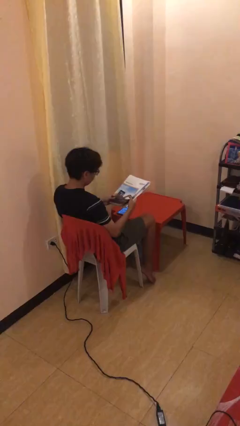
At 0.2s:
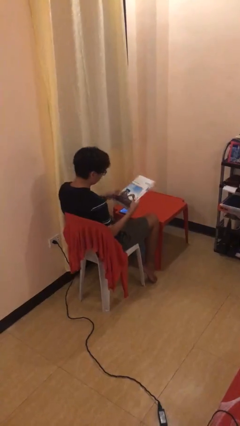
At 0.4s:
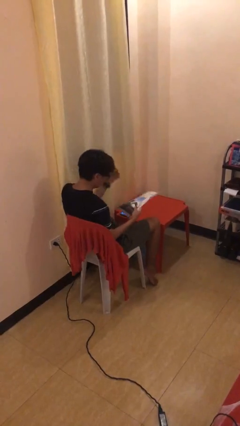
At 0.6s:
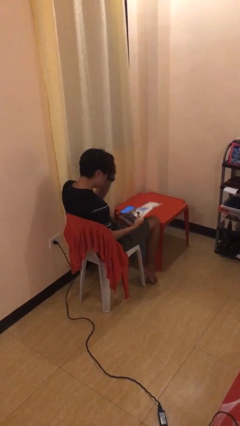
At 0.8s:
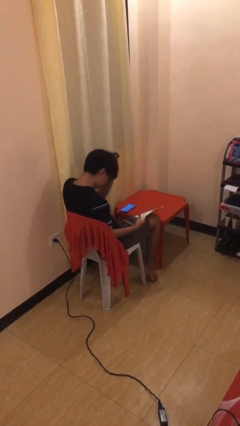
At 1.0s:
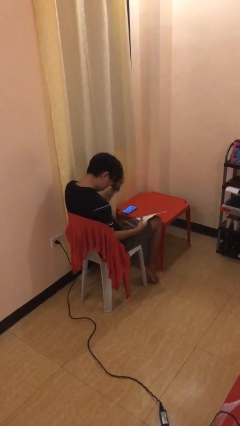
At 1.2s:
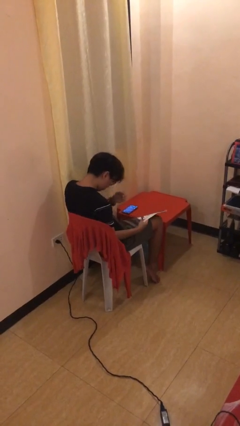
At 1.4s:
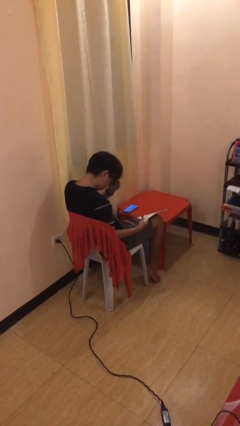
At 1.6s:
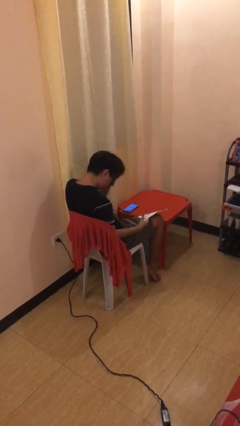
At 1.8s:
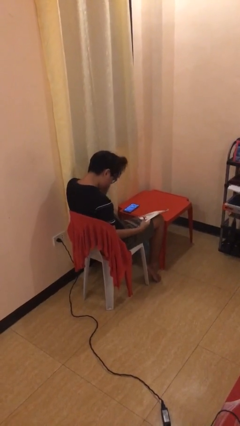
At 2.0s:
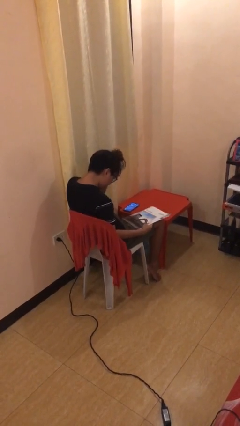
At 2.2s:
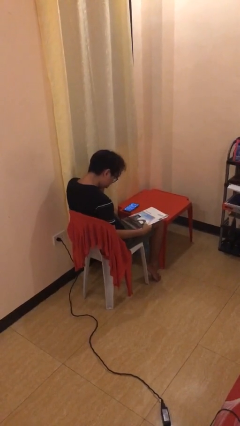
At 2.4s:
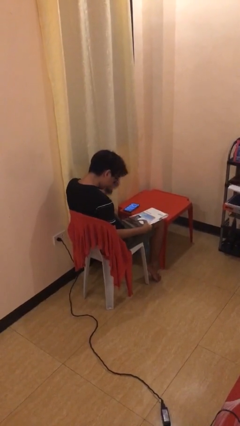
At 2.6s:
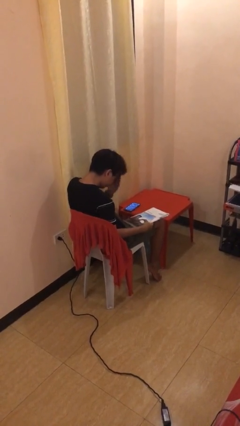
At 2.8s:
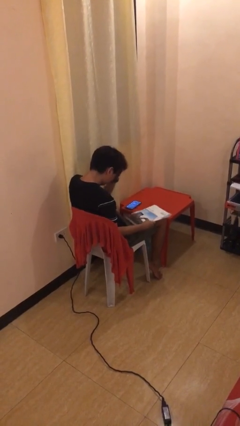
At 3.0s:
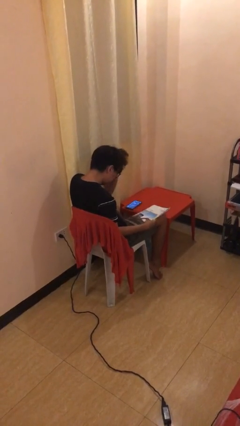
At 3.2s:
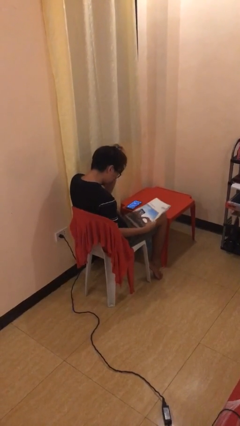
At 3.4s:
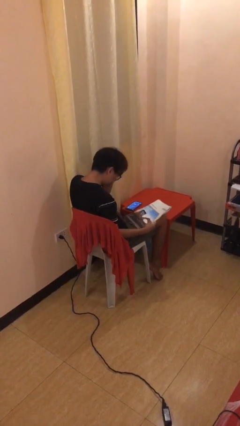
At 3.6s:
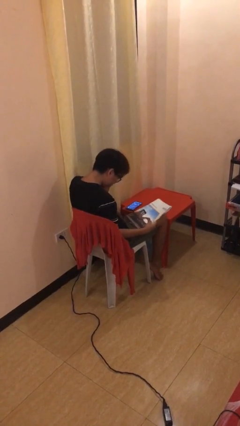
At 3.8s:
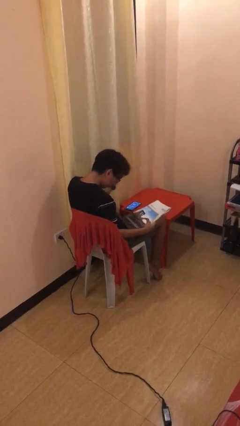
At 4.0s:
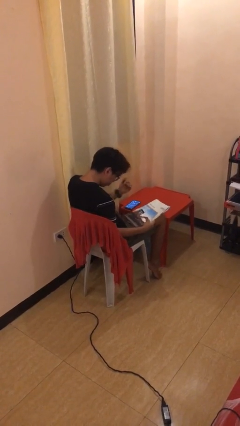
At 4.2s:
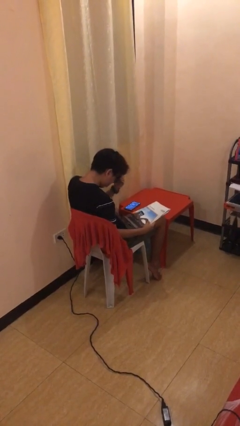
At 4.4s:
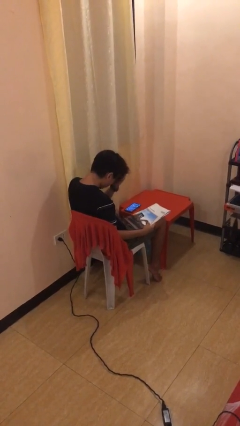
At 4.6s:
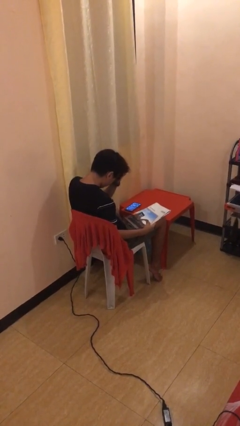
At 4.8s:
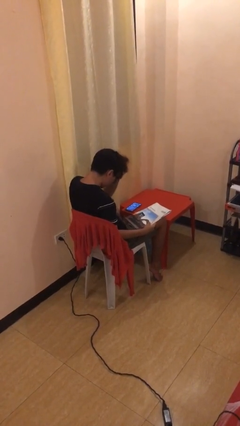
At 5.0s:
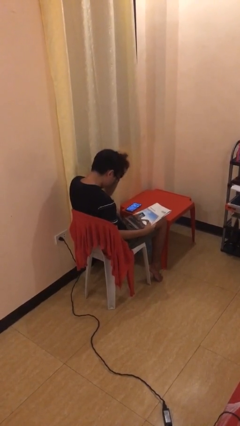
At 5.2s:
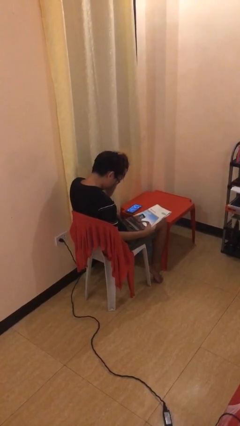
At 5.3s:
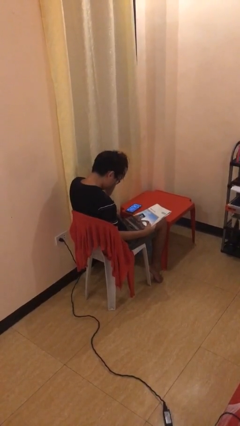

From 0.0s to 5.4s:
person reads document

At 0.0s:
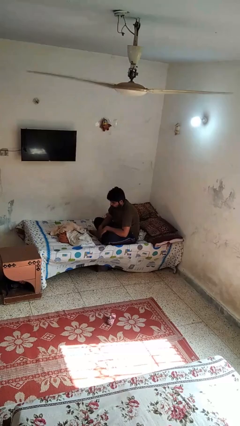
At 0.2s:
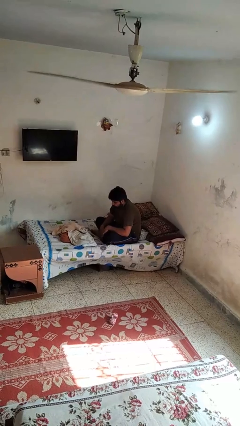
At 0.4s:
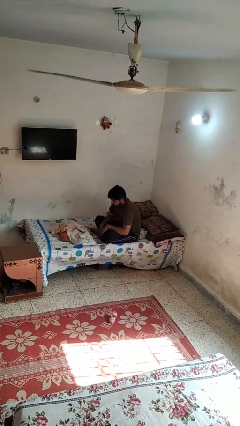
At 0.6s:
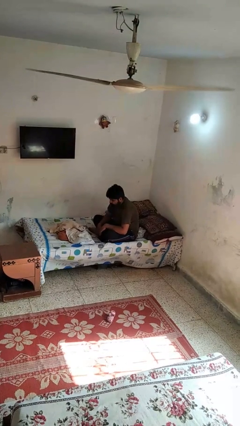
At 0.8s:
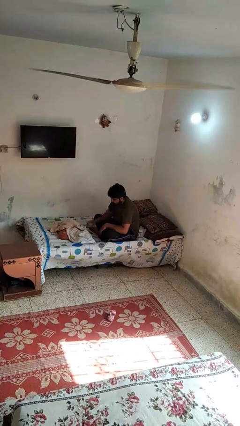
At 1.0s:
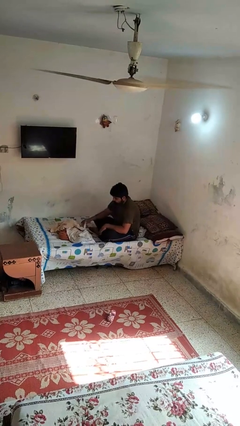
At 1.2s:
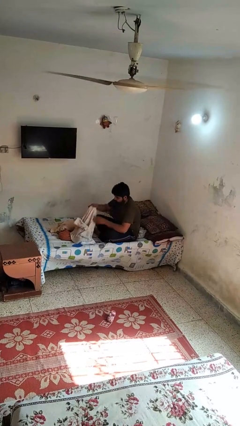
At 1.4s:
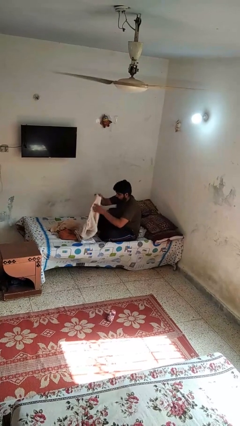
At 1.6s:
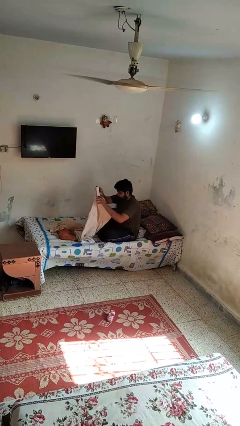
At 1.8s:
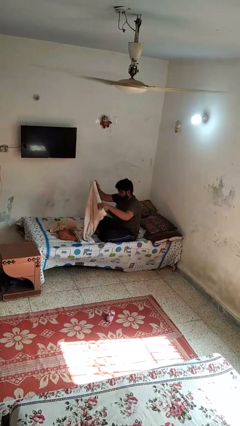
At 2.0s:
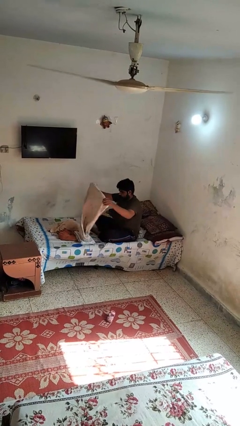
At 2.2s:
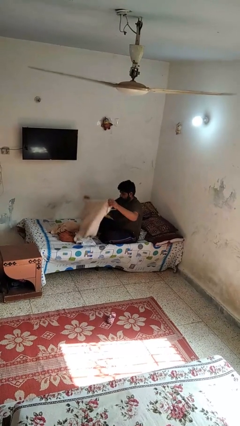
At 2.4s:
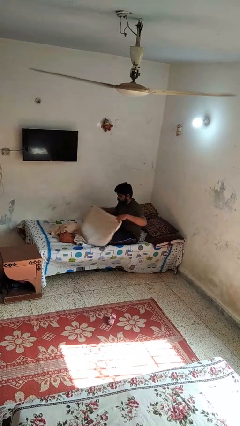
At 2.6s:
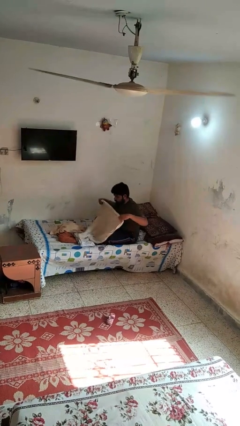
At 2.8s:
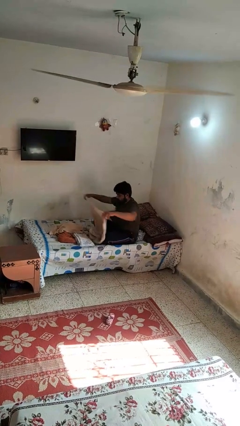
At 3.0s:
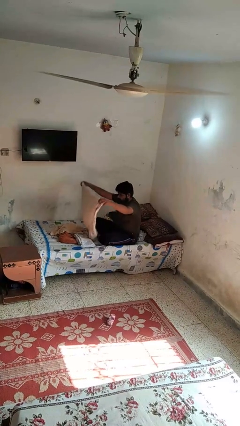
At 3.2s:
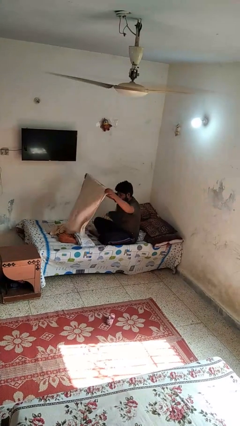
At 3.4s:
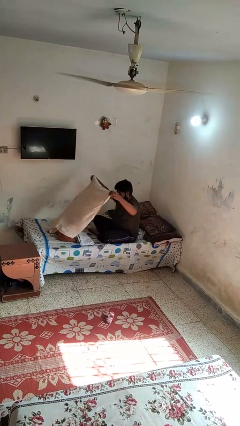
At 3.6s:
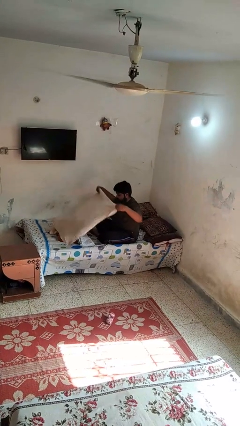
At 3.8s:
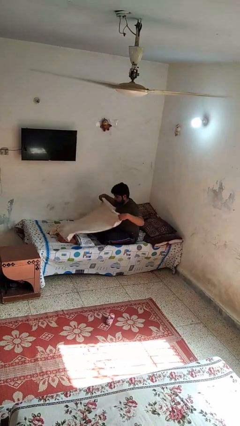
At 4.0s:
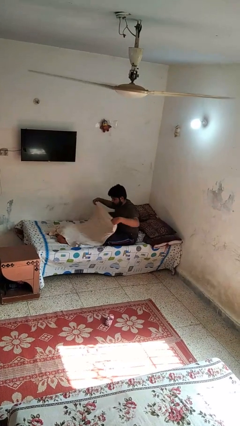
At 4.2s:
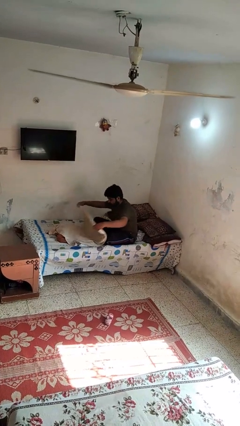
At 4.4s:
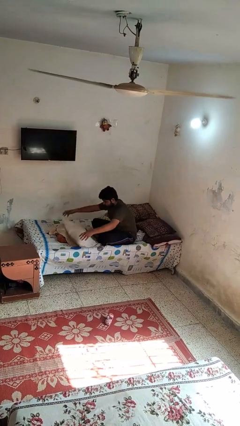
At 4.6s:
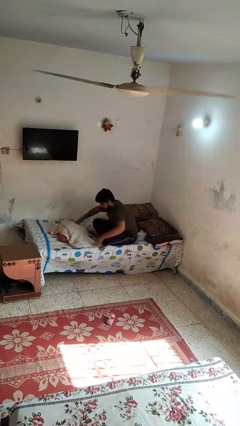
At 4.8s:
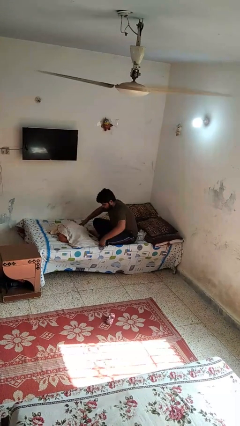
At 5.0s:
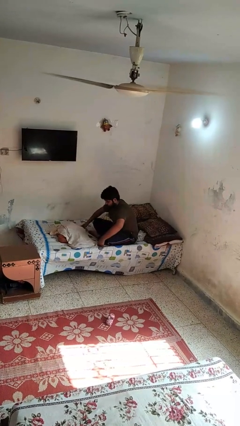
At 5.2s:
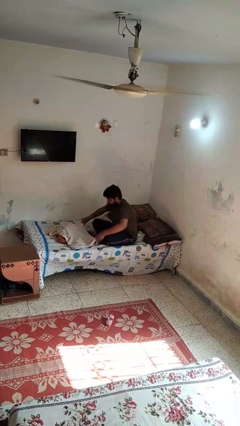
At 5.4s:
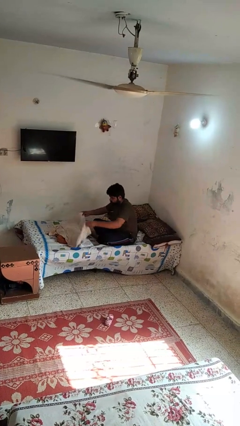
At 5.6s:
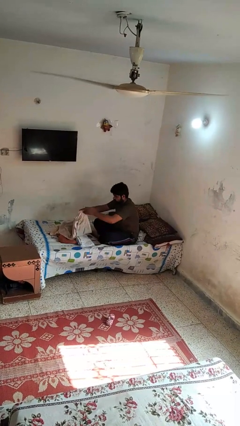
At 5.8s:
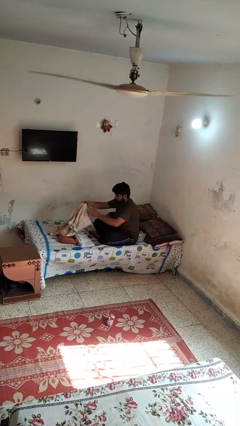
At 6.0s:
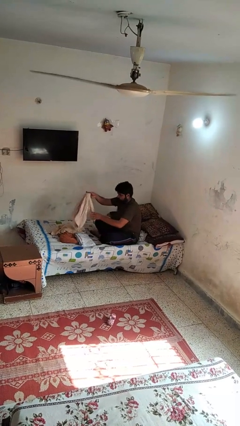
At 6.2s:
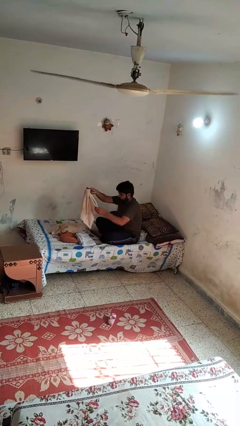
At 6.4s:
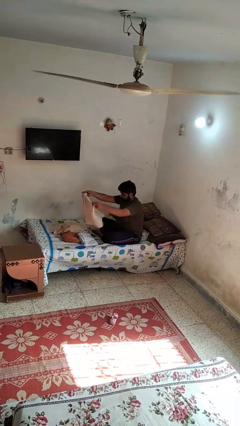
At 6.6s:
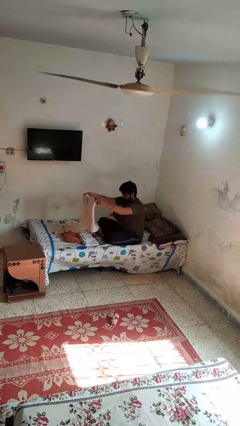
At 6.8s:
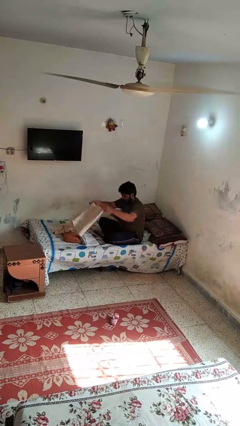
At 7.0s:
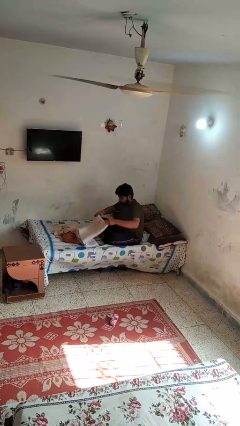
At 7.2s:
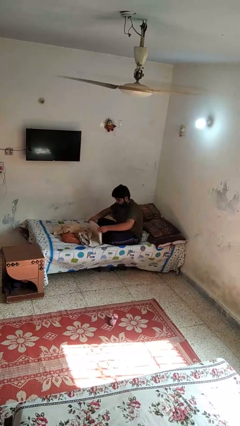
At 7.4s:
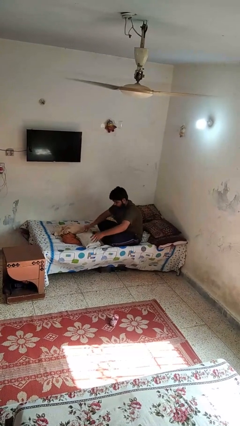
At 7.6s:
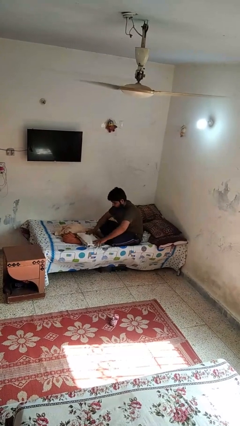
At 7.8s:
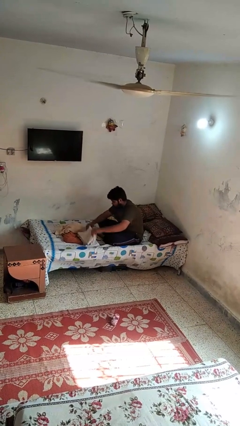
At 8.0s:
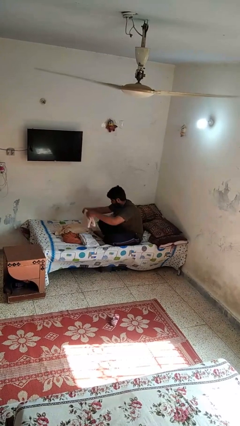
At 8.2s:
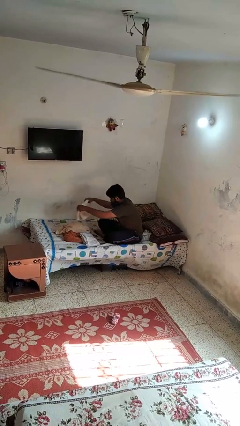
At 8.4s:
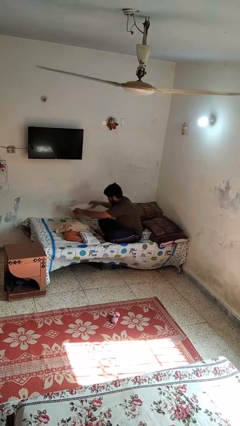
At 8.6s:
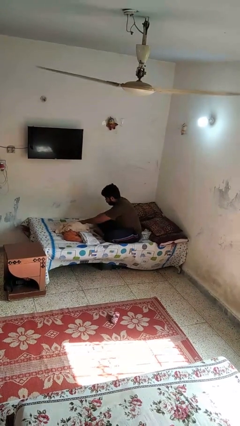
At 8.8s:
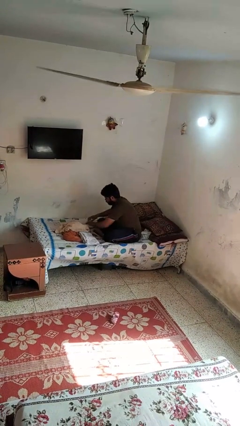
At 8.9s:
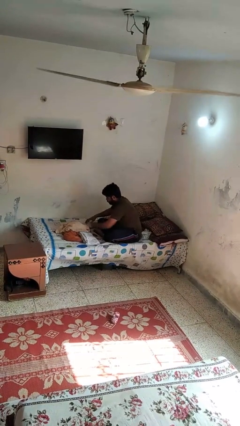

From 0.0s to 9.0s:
person folds towel

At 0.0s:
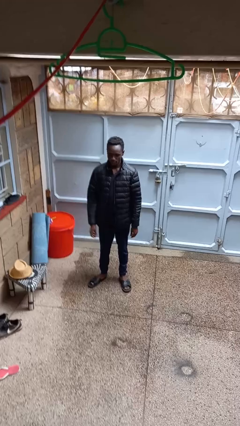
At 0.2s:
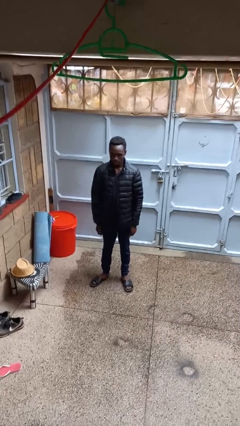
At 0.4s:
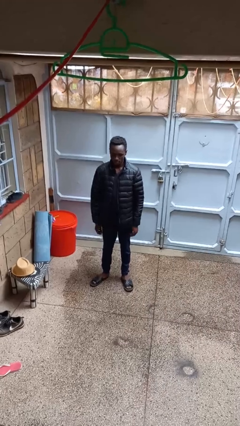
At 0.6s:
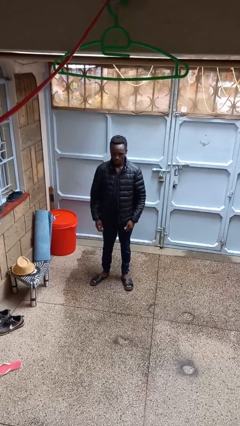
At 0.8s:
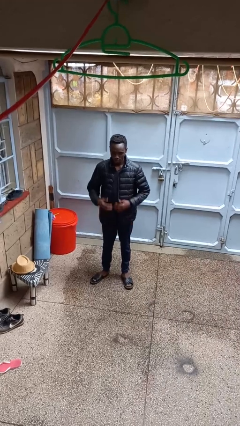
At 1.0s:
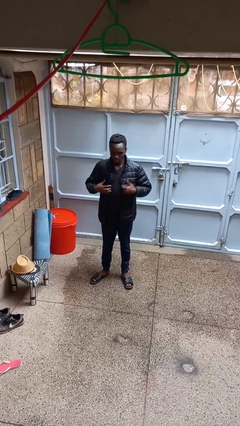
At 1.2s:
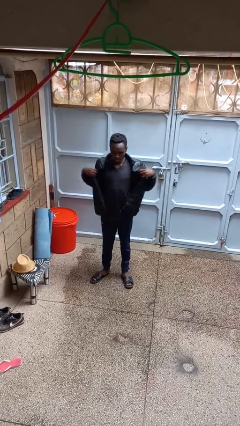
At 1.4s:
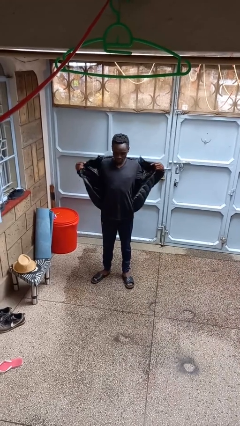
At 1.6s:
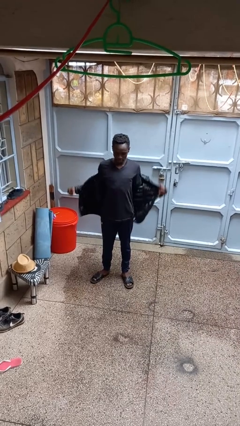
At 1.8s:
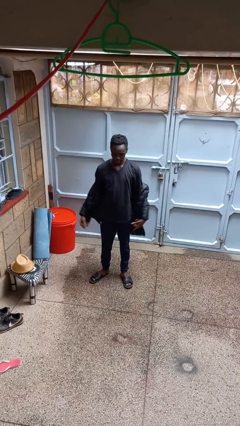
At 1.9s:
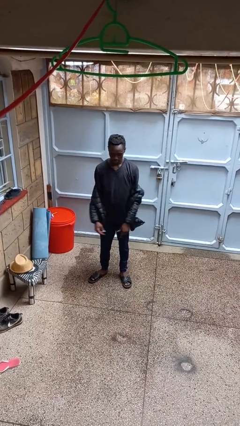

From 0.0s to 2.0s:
person takes off jacket

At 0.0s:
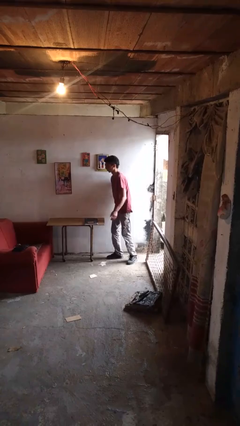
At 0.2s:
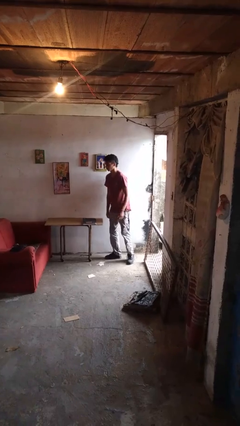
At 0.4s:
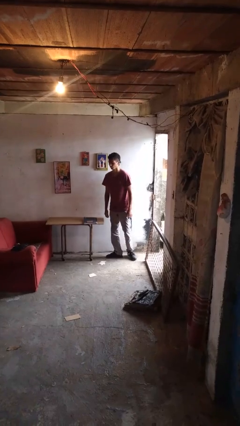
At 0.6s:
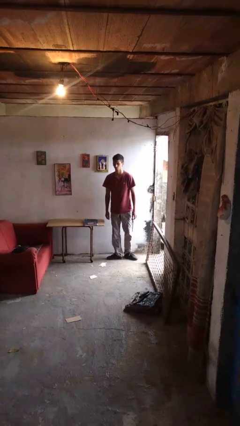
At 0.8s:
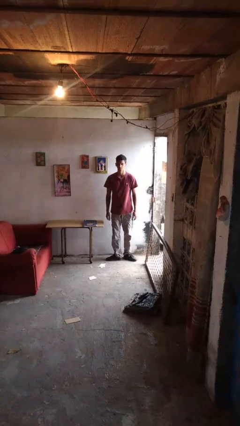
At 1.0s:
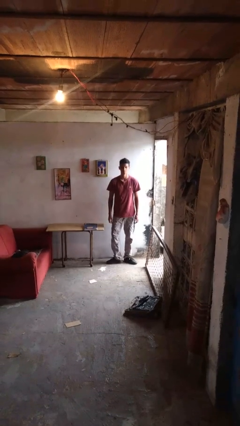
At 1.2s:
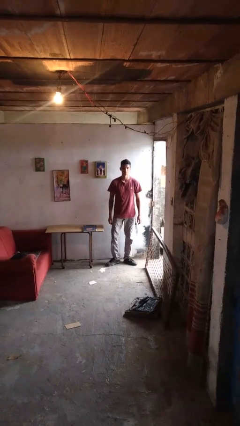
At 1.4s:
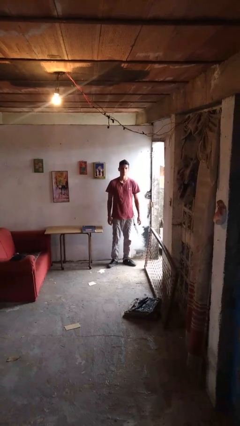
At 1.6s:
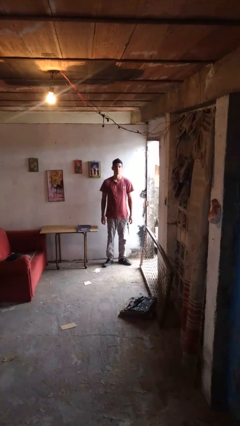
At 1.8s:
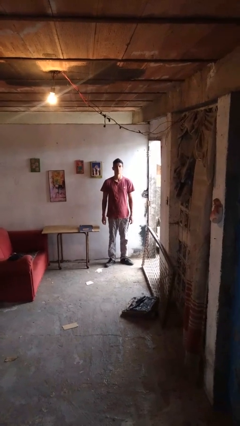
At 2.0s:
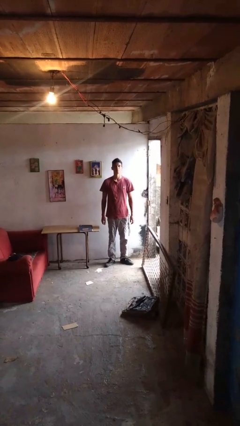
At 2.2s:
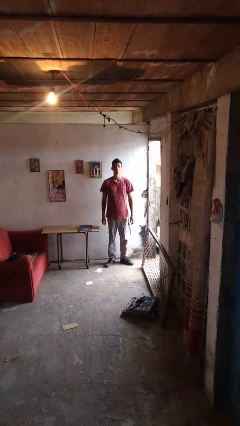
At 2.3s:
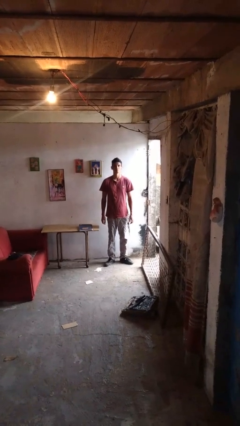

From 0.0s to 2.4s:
person drops object
